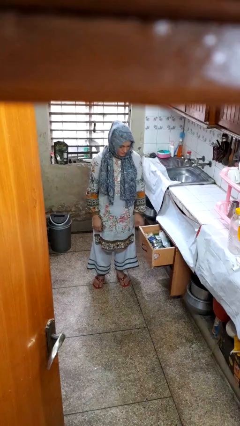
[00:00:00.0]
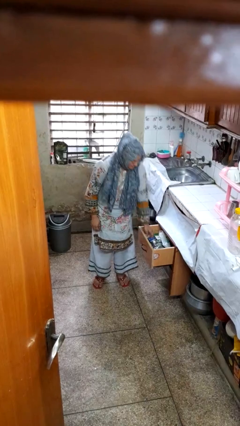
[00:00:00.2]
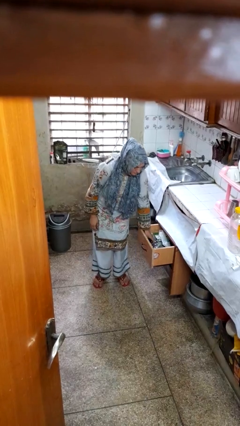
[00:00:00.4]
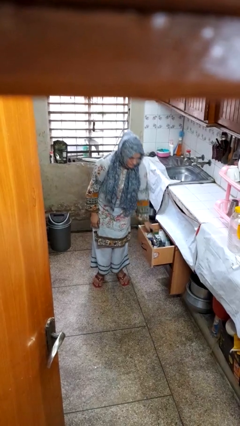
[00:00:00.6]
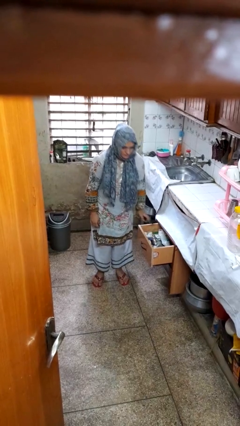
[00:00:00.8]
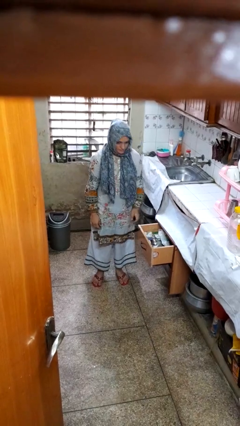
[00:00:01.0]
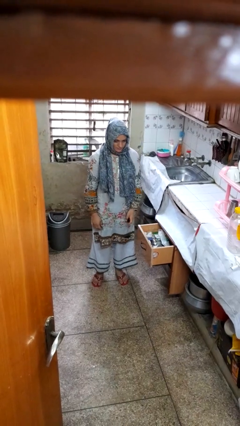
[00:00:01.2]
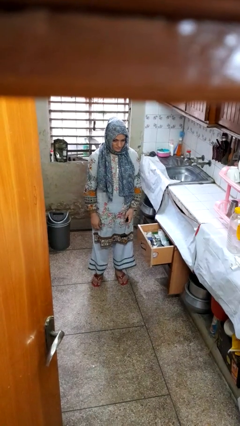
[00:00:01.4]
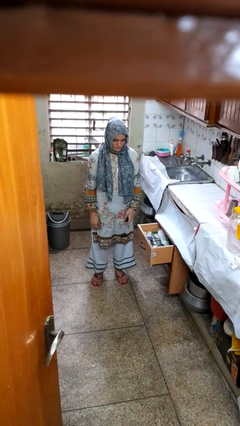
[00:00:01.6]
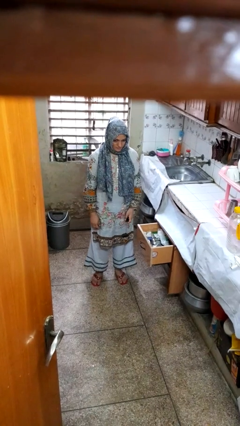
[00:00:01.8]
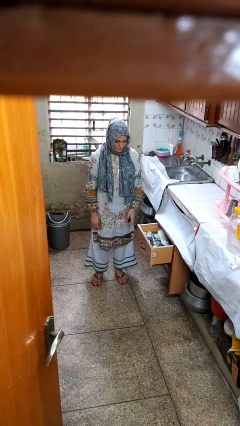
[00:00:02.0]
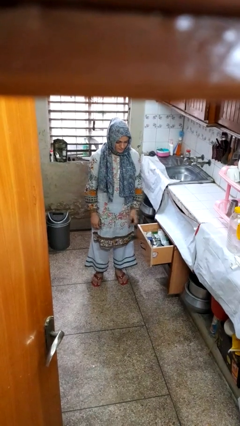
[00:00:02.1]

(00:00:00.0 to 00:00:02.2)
person takes object from kitchen drawer

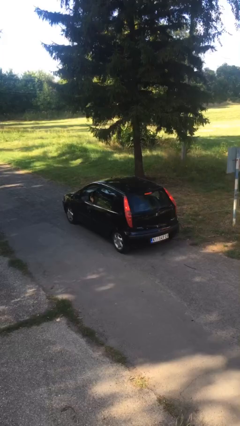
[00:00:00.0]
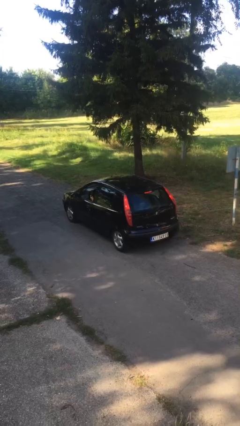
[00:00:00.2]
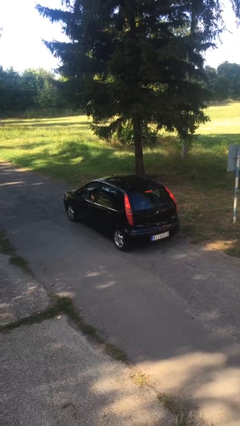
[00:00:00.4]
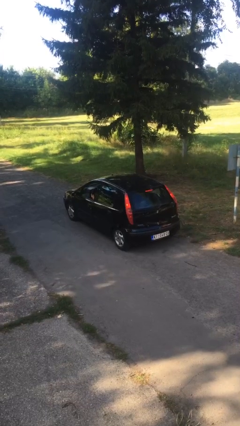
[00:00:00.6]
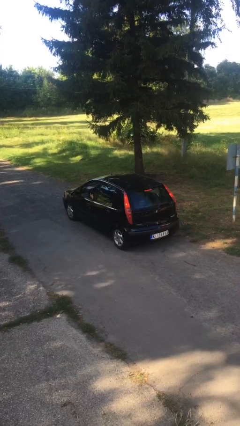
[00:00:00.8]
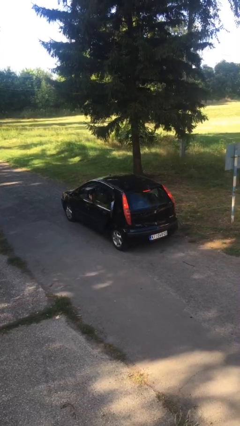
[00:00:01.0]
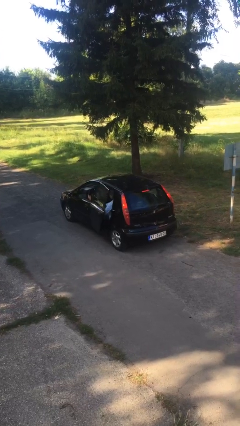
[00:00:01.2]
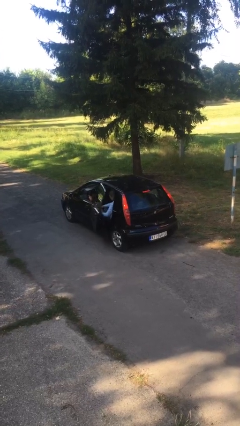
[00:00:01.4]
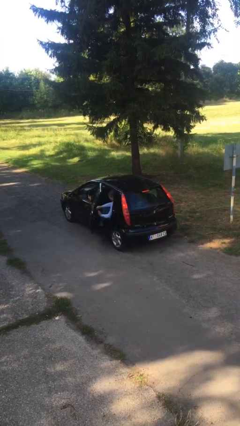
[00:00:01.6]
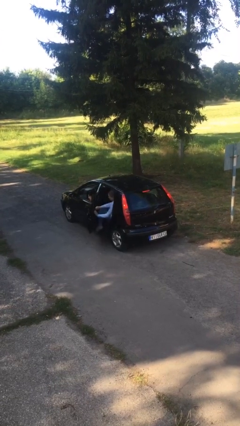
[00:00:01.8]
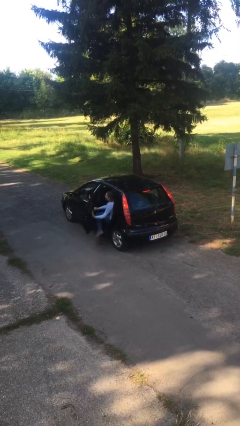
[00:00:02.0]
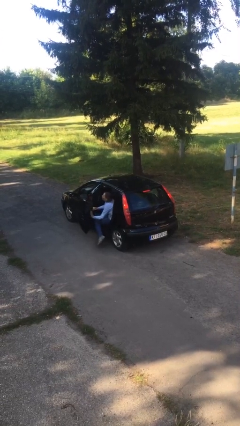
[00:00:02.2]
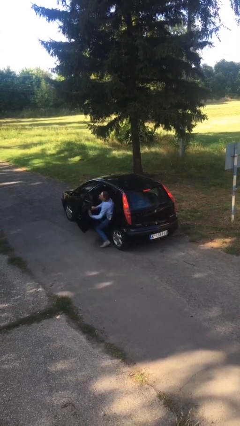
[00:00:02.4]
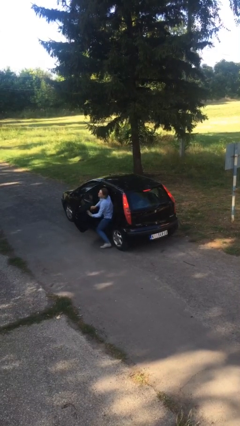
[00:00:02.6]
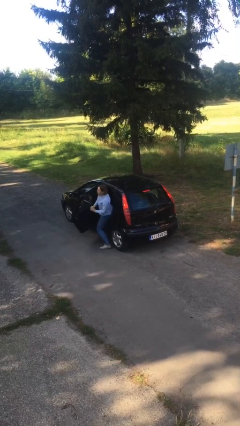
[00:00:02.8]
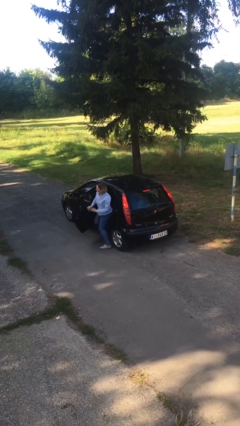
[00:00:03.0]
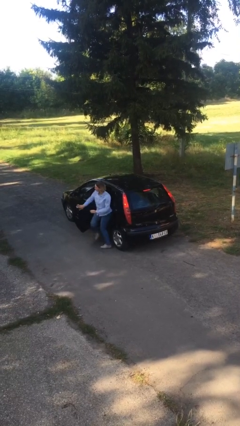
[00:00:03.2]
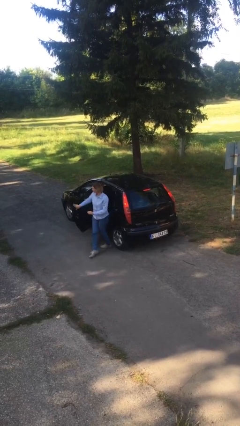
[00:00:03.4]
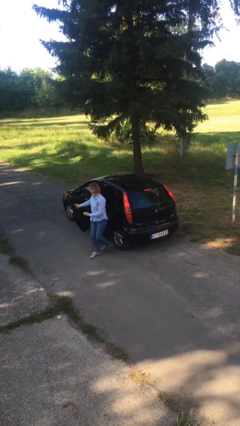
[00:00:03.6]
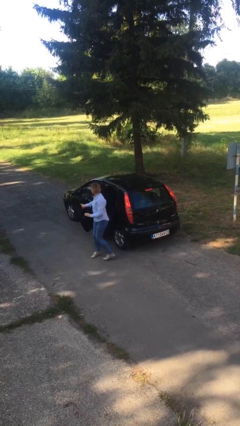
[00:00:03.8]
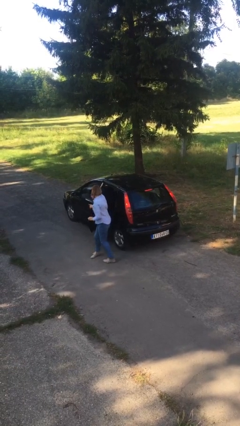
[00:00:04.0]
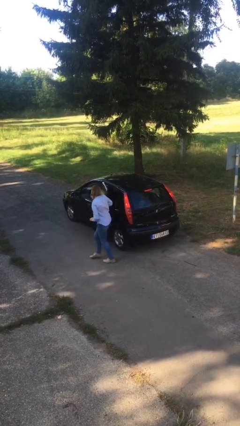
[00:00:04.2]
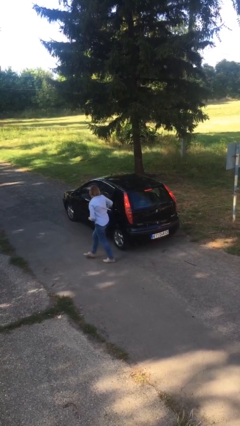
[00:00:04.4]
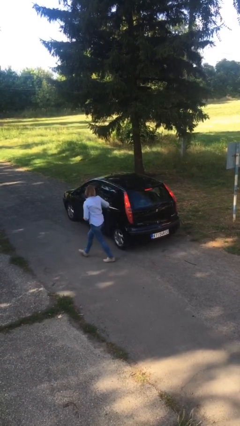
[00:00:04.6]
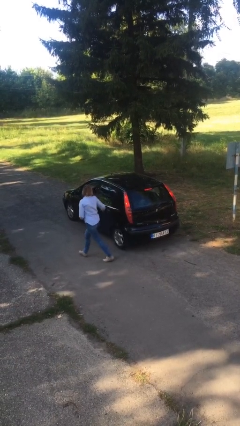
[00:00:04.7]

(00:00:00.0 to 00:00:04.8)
car drops off person

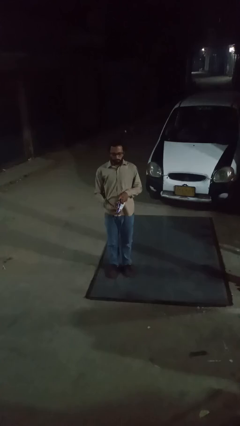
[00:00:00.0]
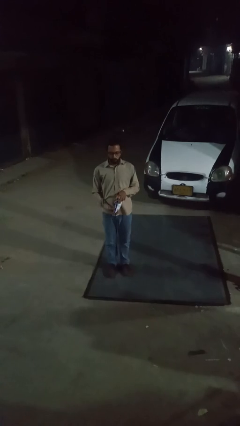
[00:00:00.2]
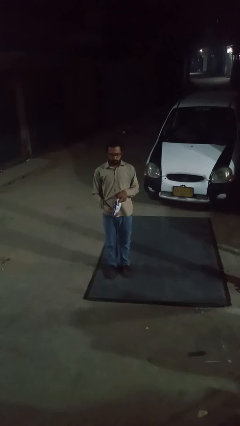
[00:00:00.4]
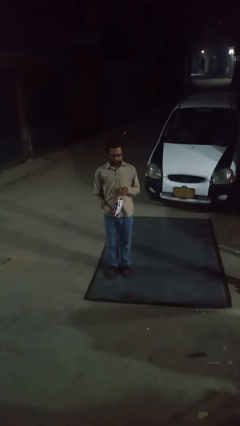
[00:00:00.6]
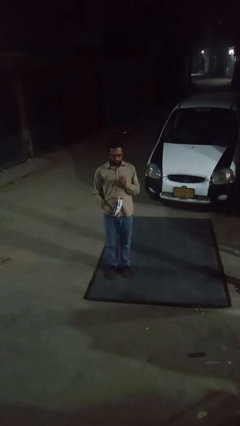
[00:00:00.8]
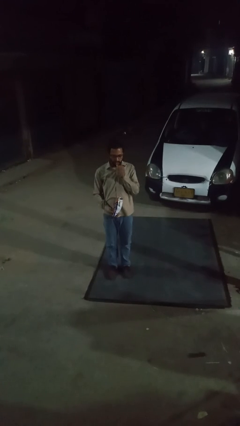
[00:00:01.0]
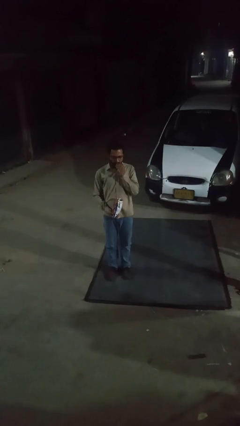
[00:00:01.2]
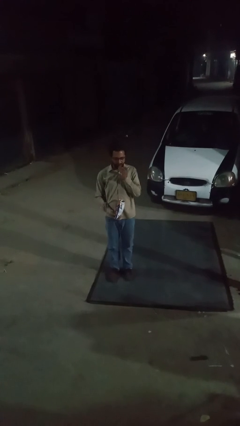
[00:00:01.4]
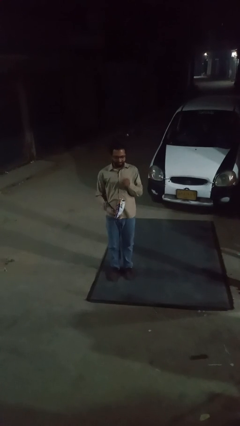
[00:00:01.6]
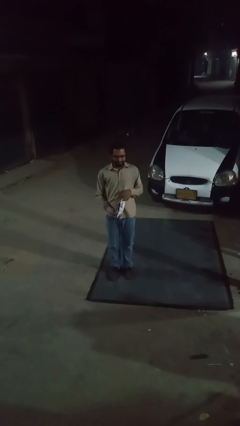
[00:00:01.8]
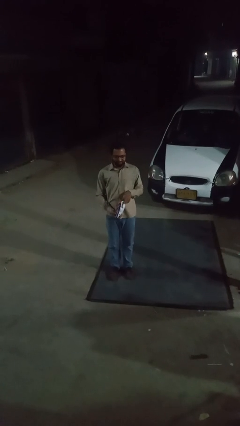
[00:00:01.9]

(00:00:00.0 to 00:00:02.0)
person eats snack from bag

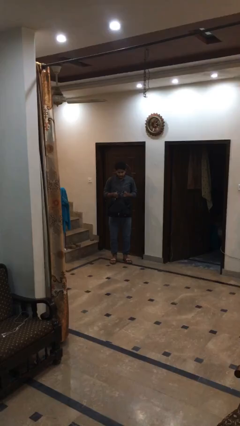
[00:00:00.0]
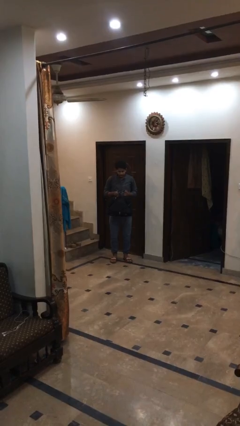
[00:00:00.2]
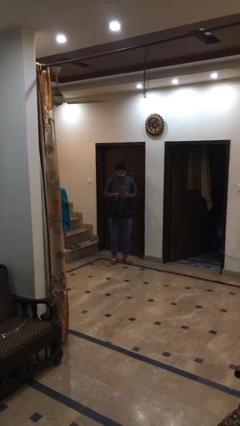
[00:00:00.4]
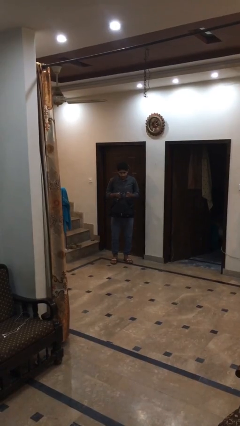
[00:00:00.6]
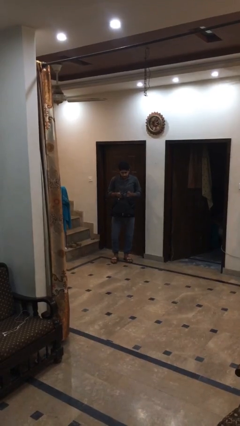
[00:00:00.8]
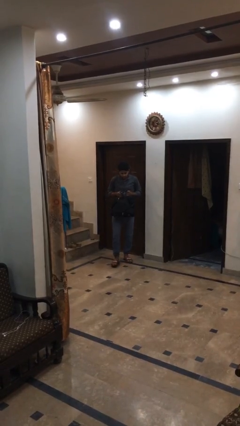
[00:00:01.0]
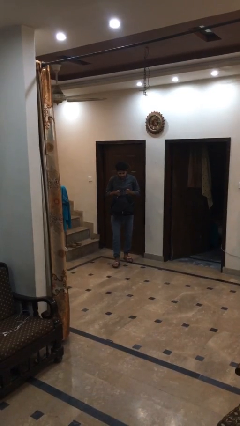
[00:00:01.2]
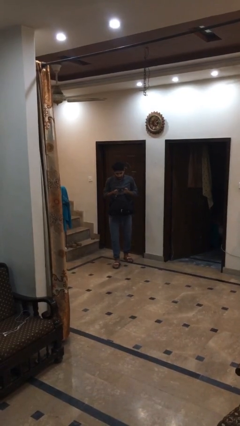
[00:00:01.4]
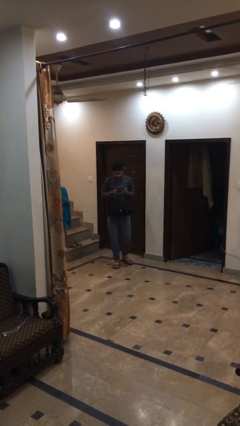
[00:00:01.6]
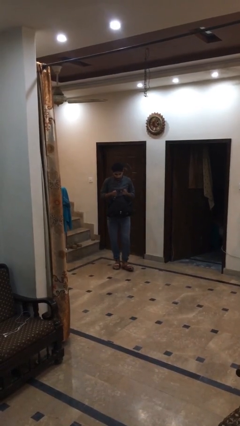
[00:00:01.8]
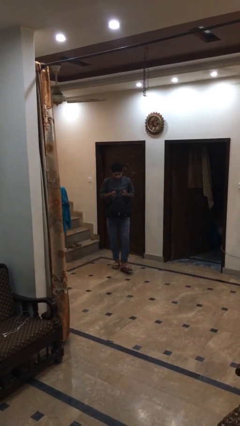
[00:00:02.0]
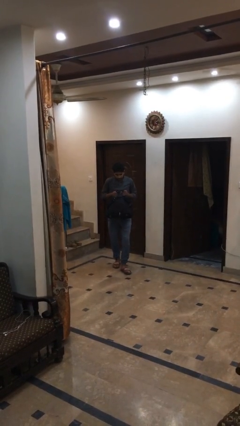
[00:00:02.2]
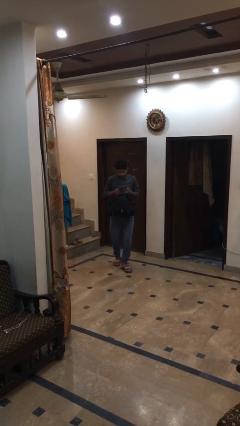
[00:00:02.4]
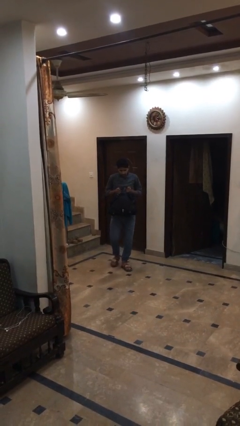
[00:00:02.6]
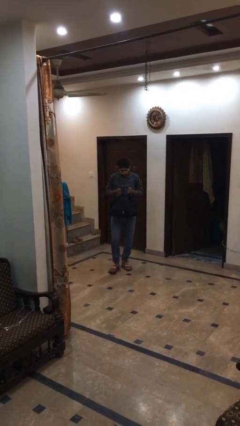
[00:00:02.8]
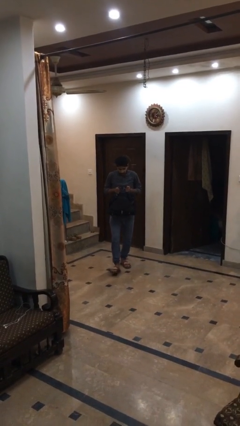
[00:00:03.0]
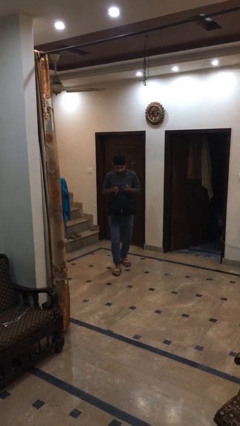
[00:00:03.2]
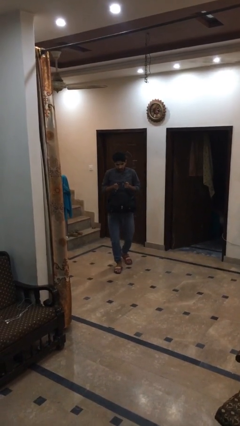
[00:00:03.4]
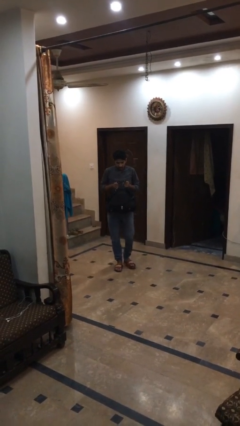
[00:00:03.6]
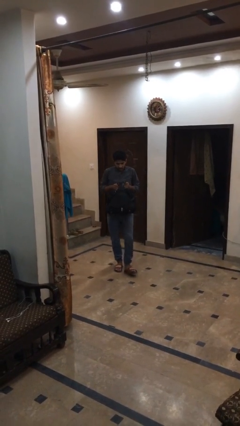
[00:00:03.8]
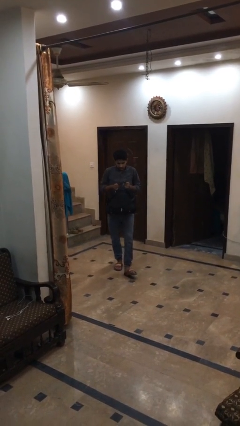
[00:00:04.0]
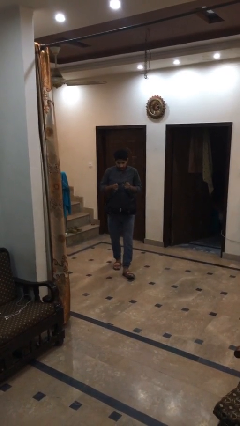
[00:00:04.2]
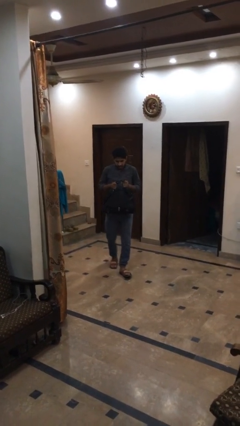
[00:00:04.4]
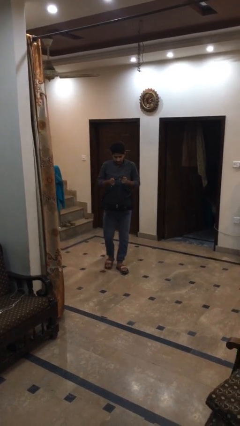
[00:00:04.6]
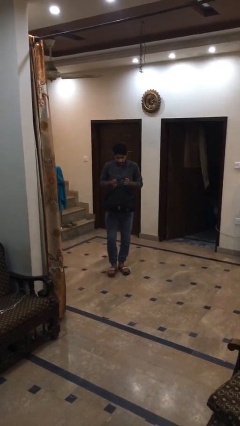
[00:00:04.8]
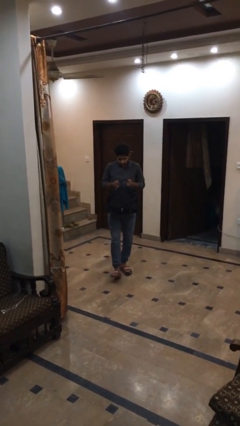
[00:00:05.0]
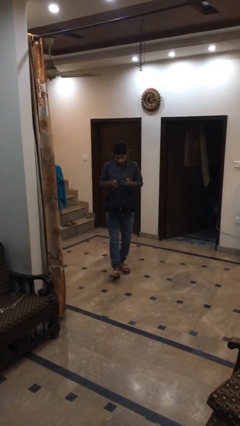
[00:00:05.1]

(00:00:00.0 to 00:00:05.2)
person carries heavy object

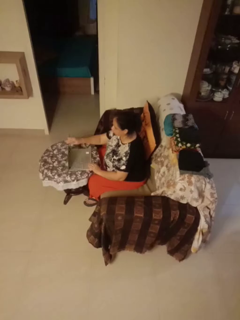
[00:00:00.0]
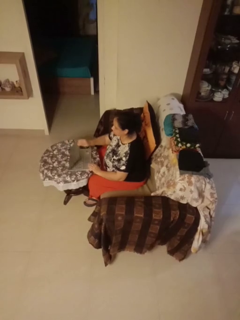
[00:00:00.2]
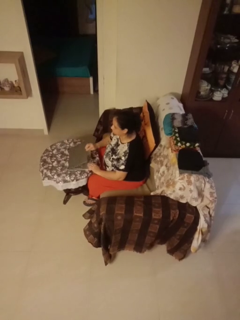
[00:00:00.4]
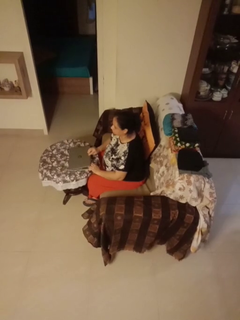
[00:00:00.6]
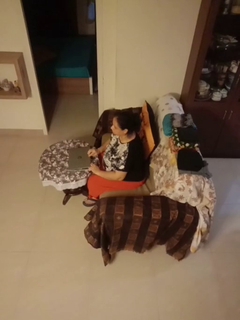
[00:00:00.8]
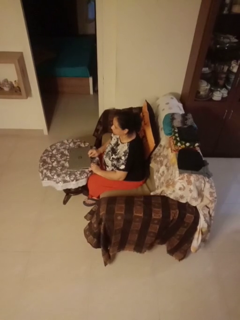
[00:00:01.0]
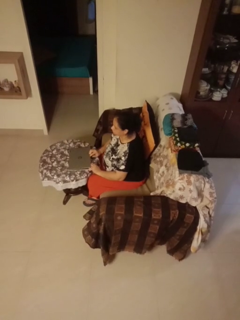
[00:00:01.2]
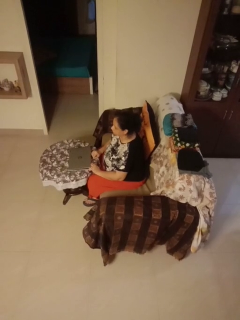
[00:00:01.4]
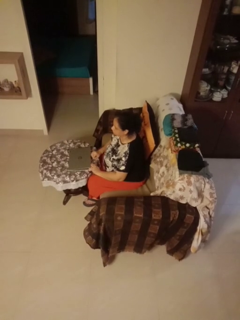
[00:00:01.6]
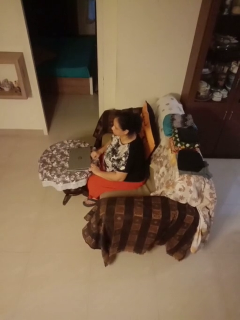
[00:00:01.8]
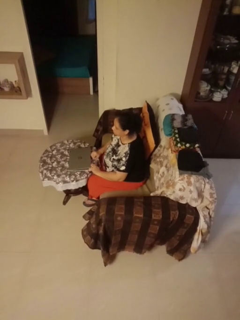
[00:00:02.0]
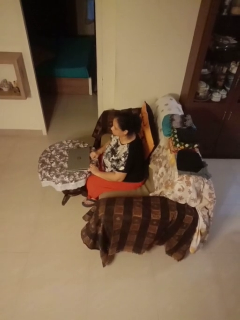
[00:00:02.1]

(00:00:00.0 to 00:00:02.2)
person closes laptop

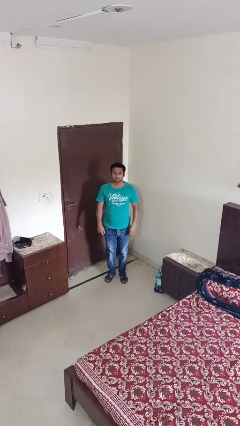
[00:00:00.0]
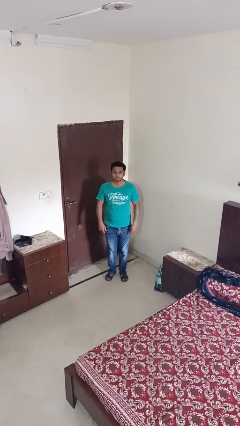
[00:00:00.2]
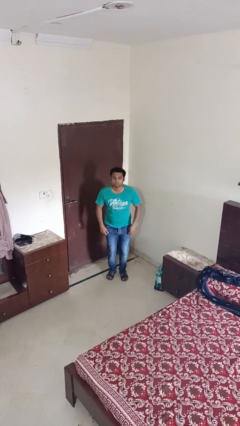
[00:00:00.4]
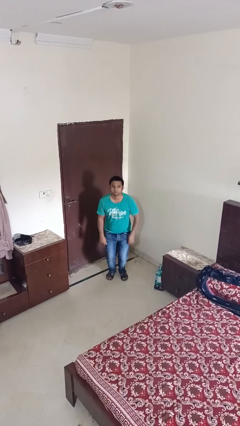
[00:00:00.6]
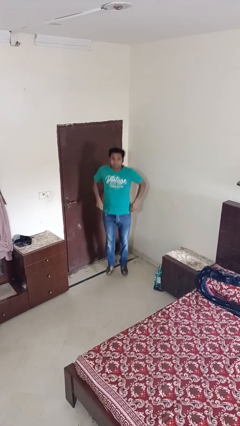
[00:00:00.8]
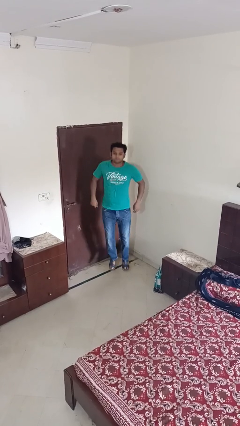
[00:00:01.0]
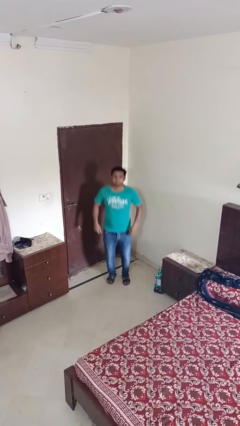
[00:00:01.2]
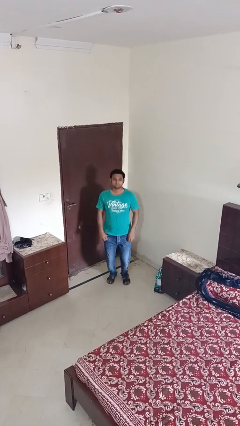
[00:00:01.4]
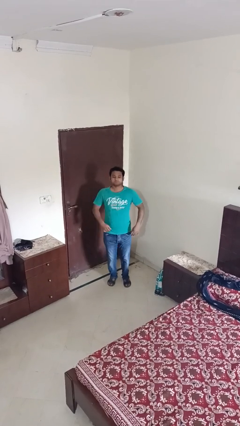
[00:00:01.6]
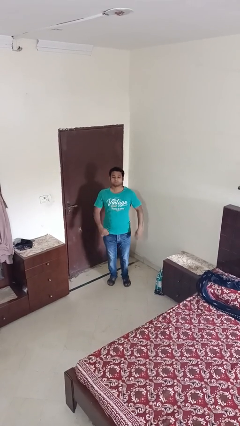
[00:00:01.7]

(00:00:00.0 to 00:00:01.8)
person jumps
